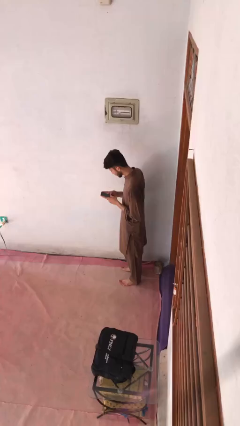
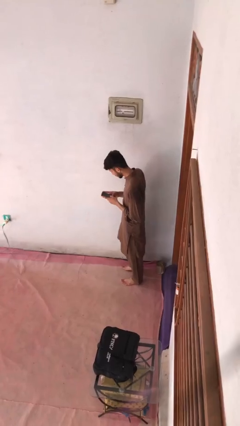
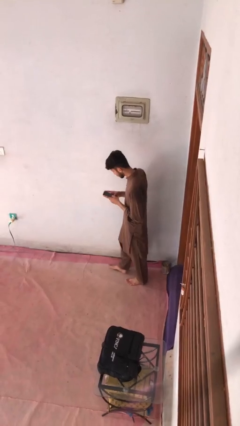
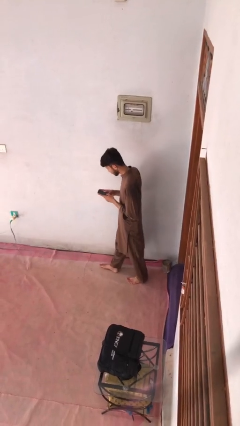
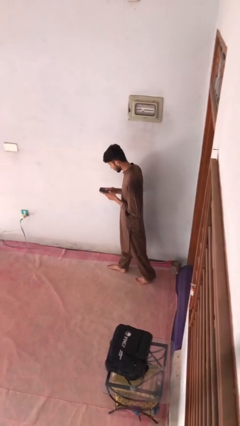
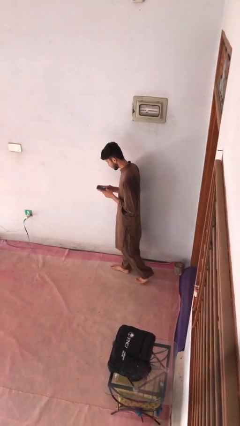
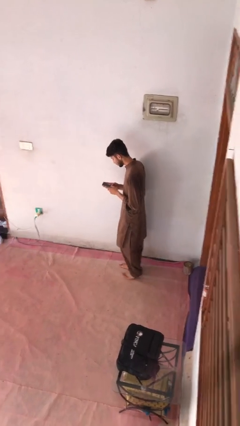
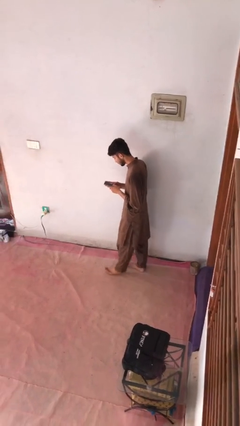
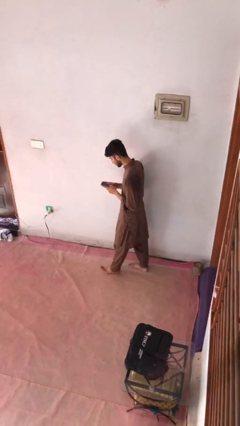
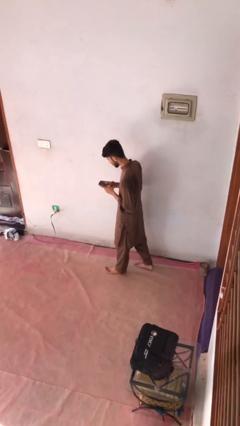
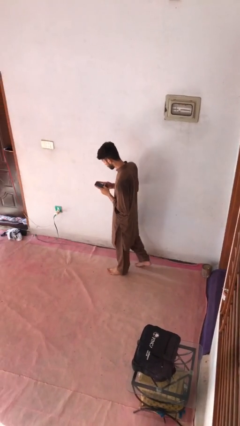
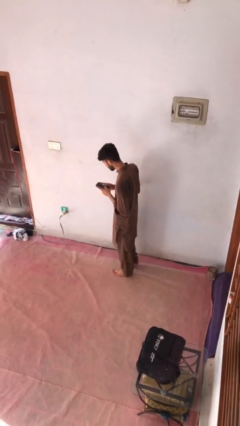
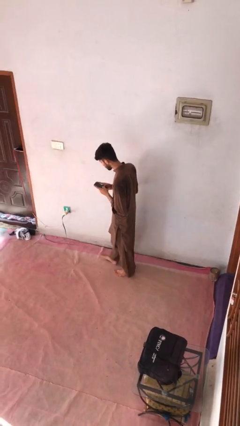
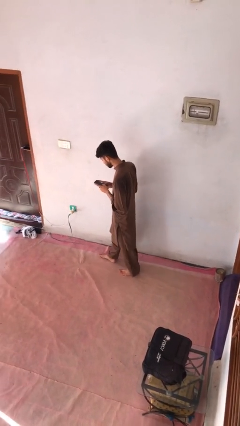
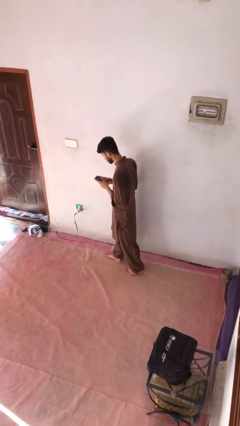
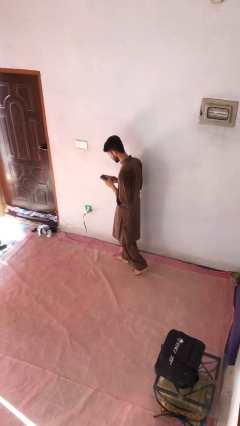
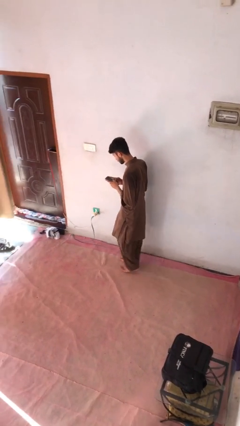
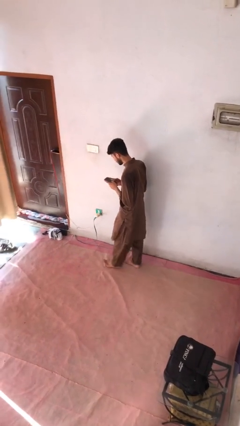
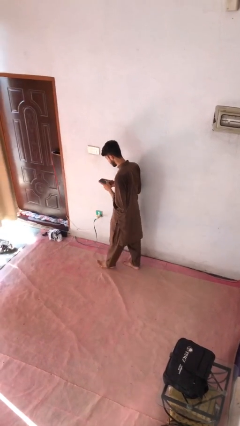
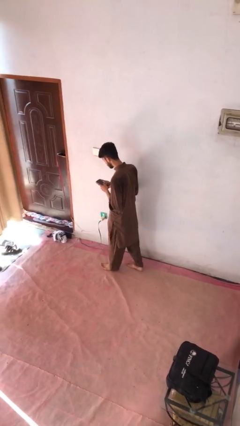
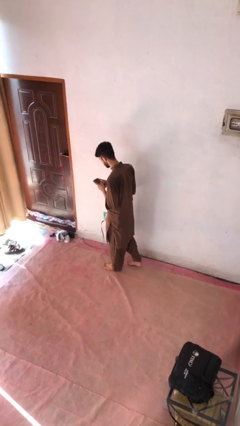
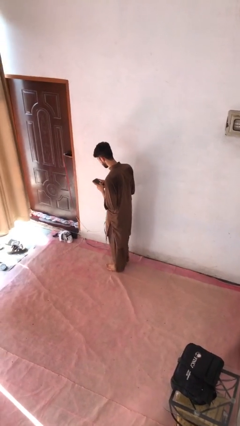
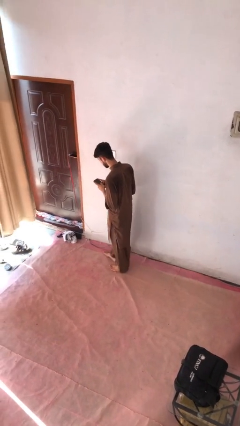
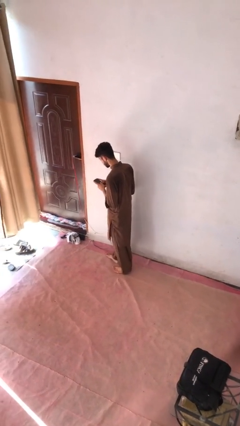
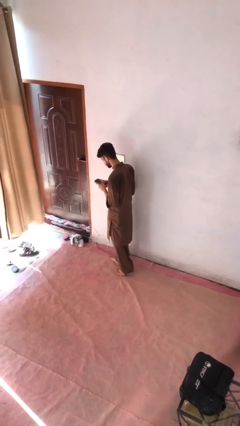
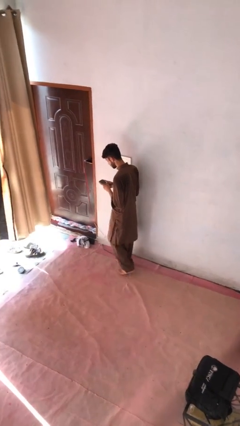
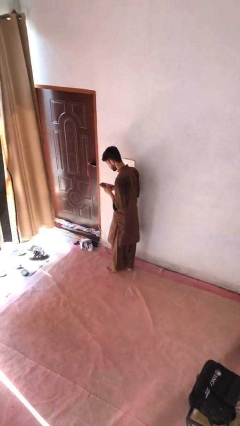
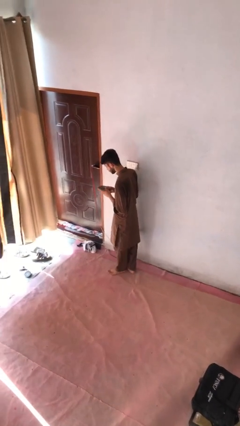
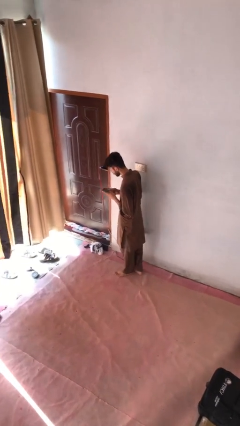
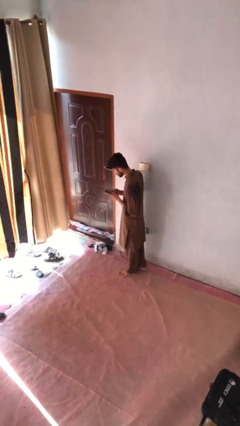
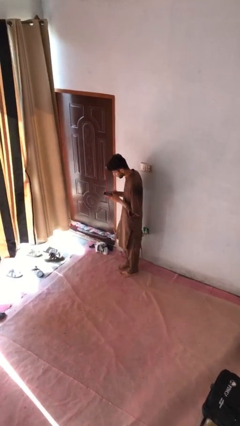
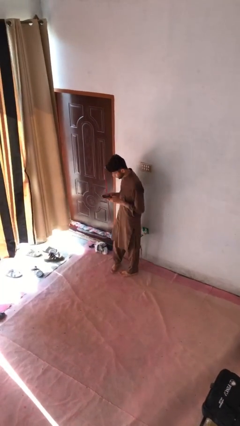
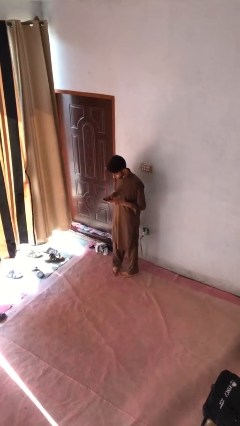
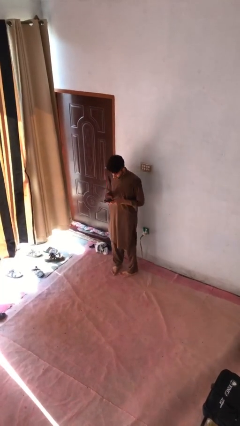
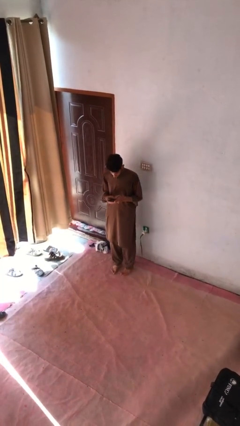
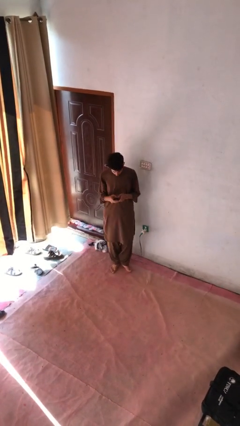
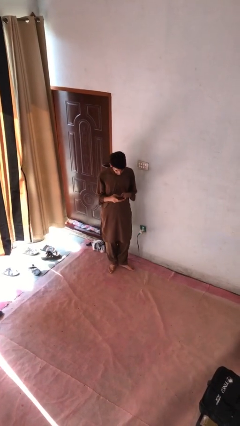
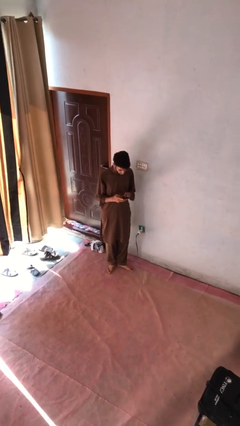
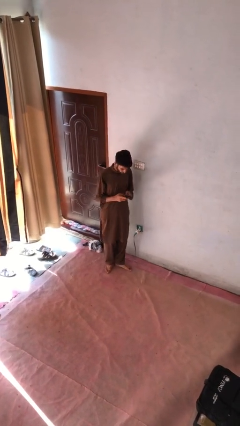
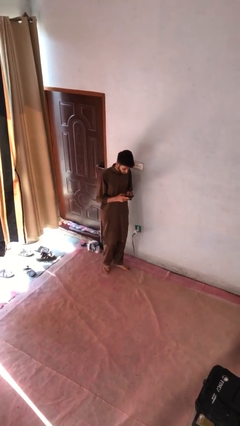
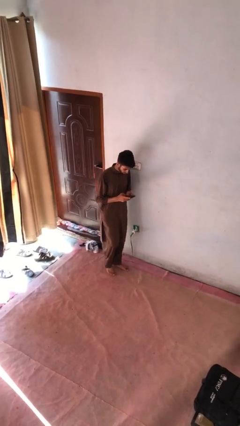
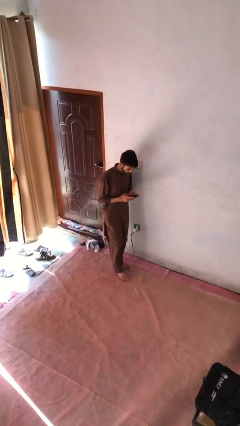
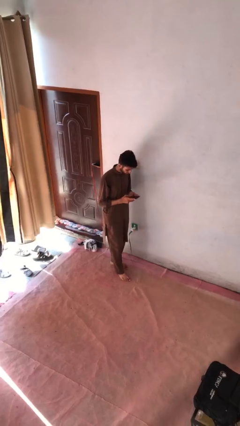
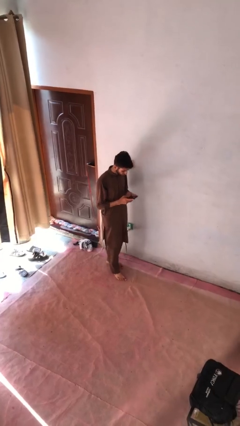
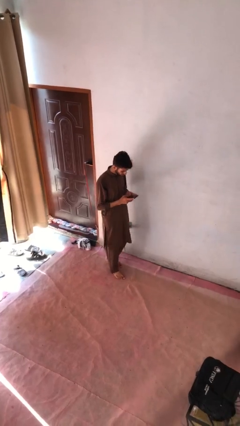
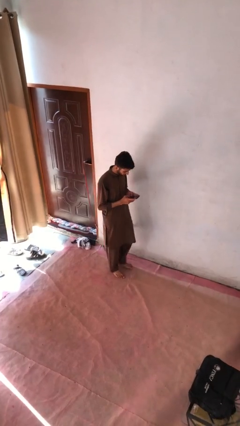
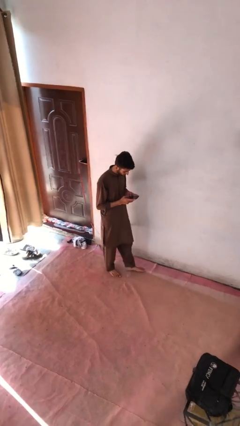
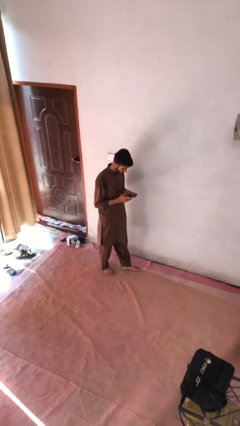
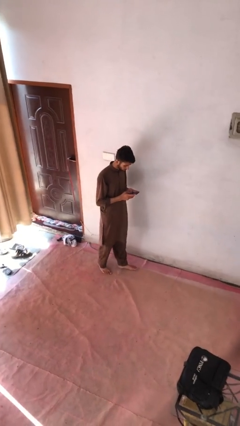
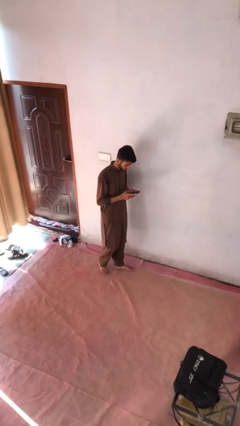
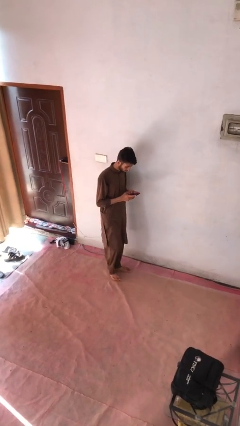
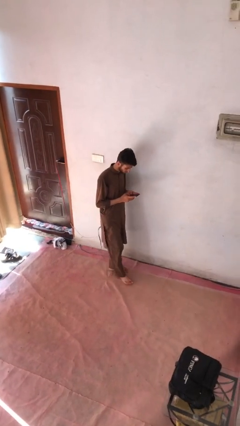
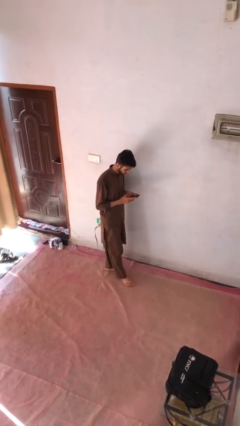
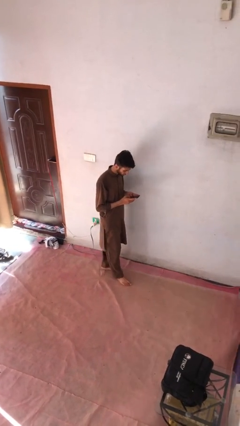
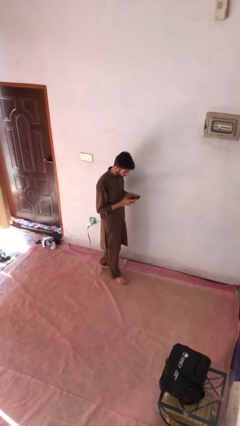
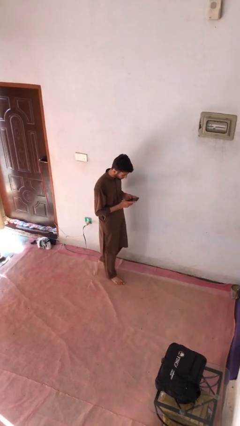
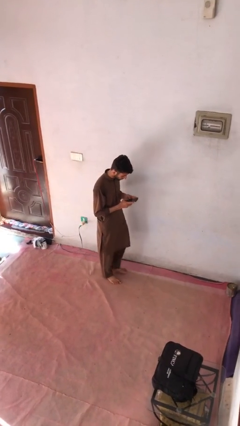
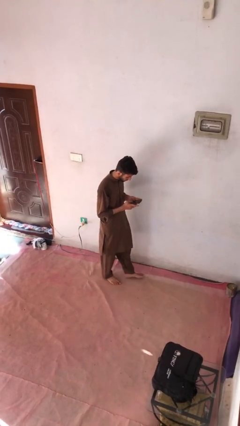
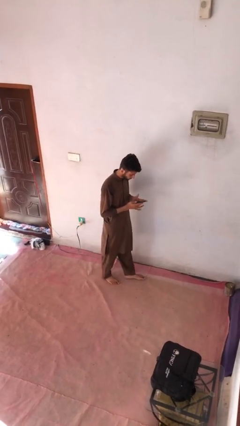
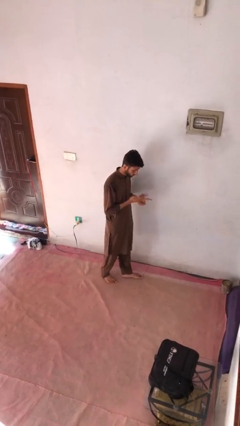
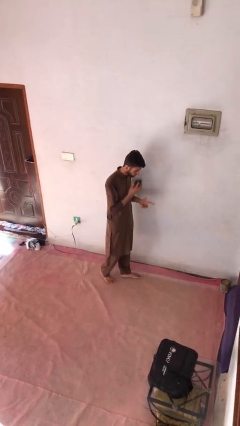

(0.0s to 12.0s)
person texts on phone

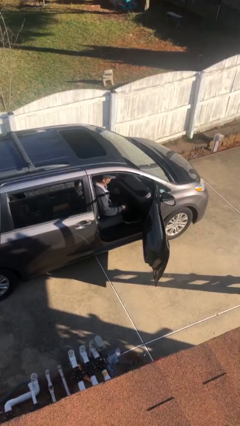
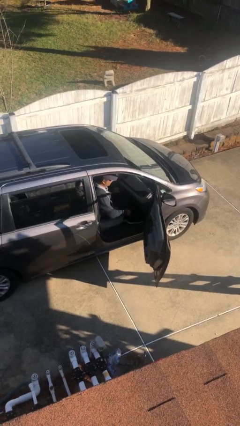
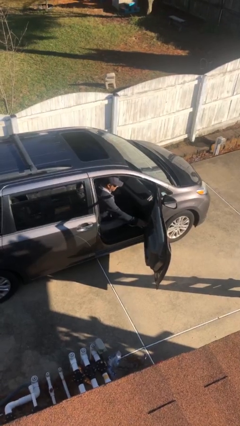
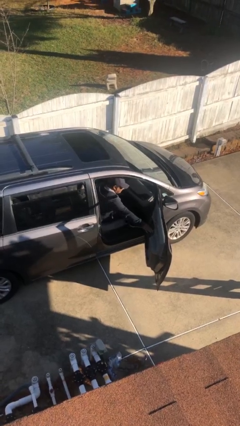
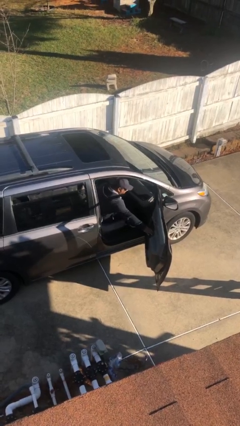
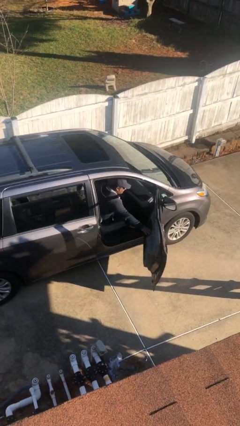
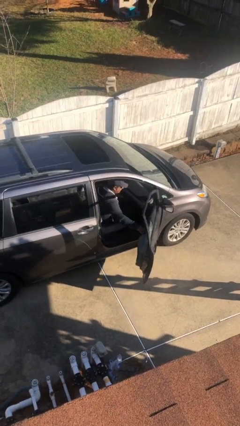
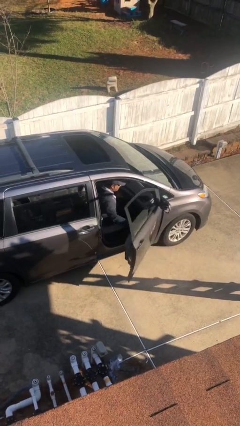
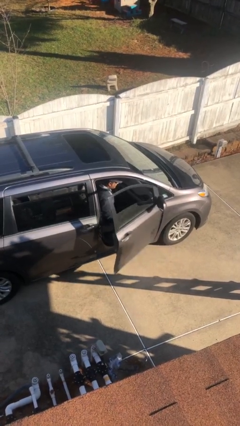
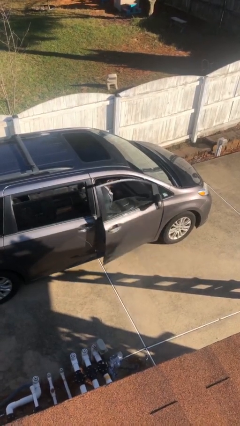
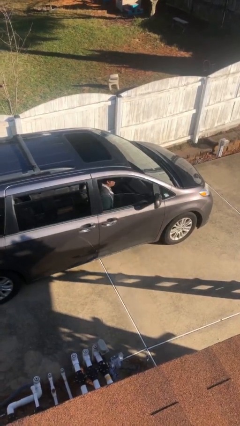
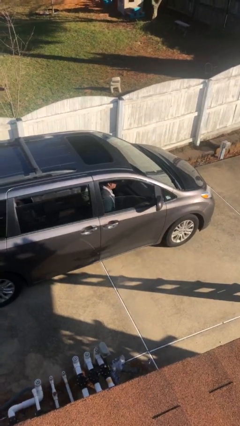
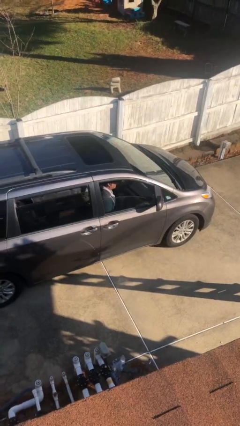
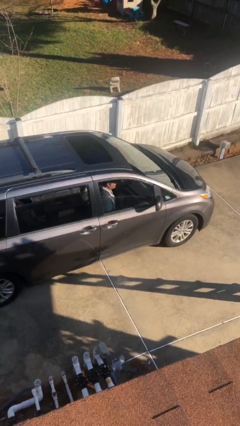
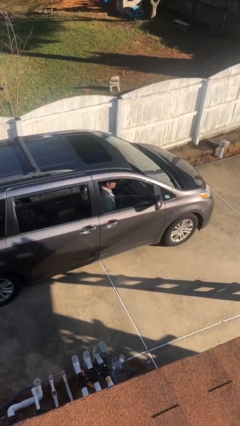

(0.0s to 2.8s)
person closes car door

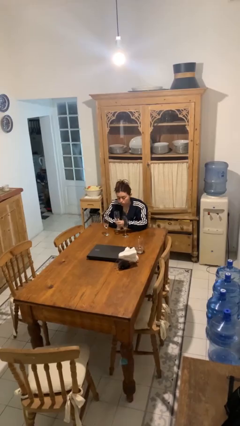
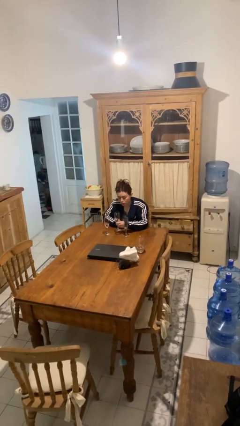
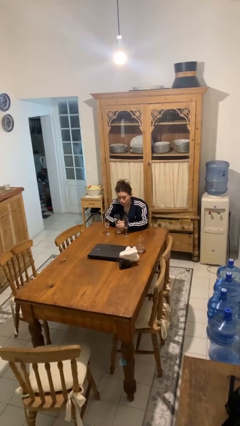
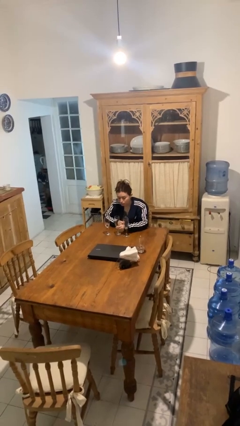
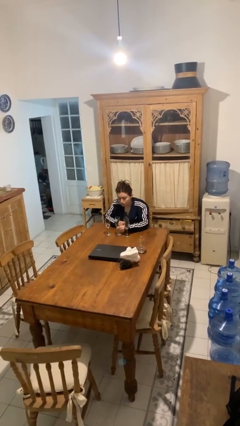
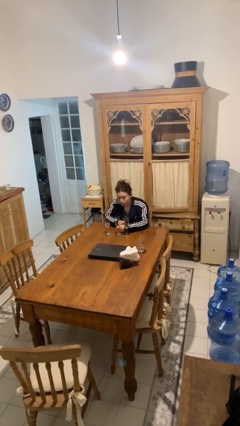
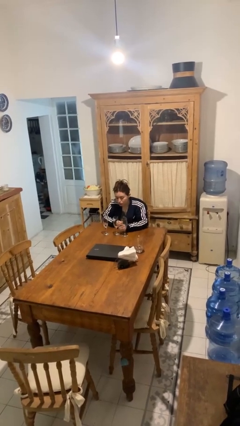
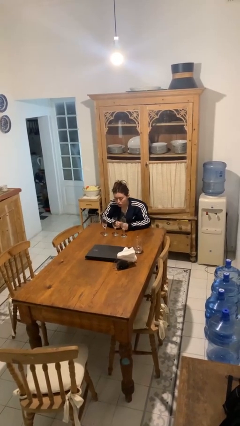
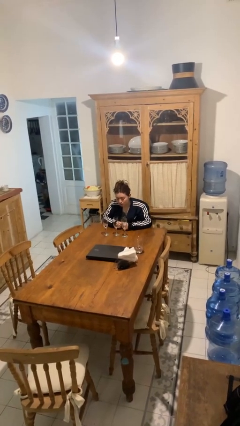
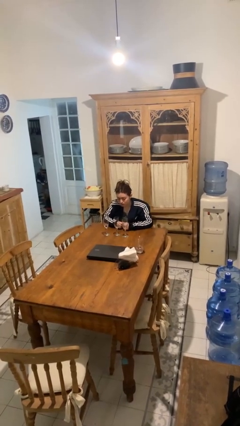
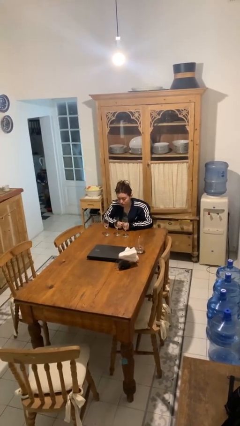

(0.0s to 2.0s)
person puts down object on table

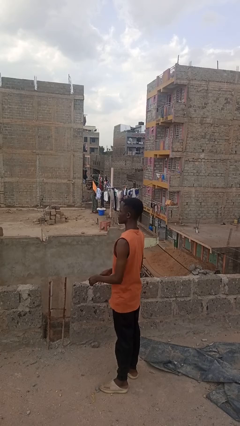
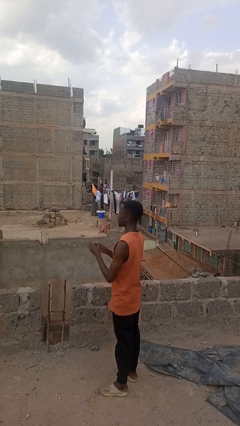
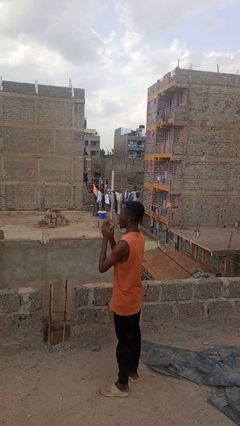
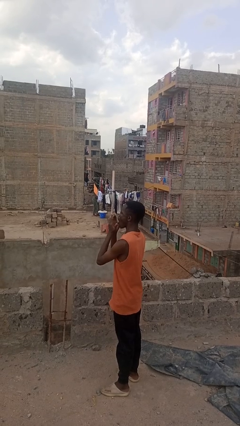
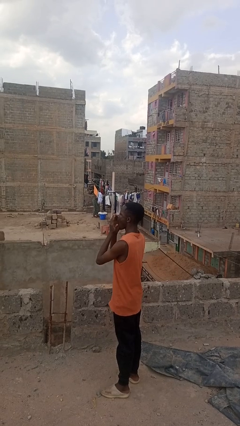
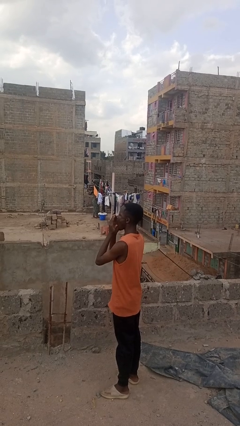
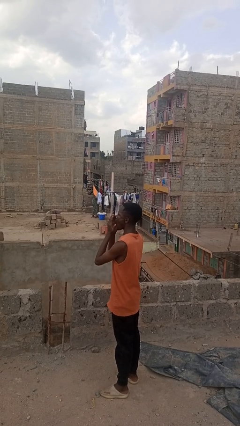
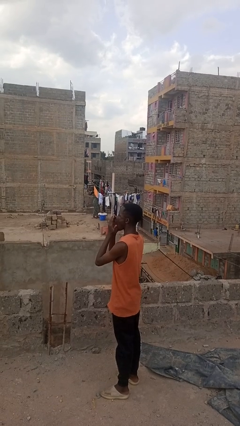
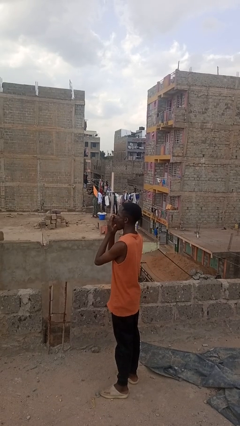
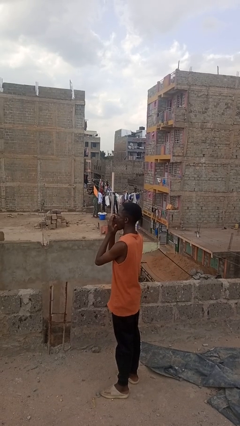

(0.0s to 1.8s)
person blows into hands
